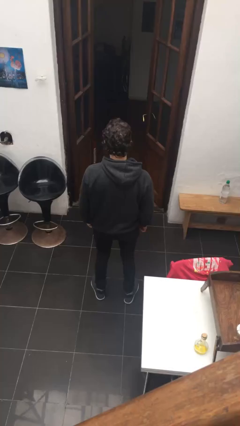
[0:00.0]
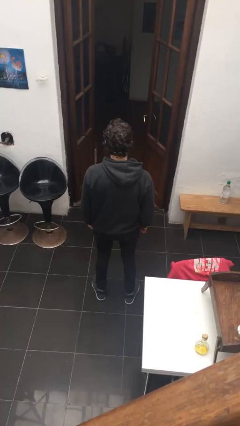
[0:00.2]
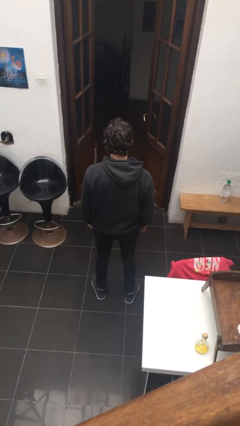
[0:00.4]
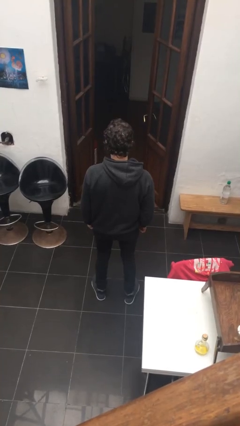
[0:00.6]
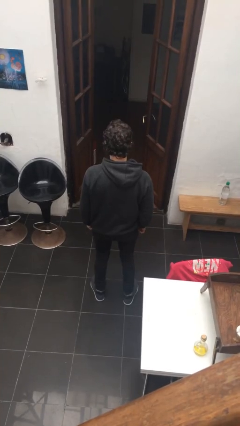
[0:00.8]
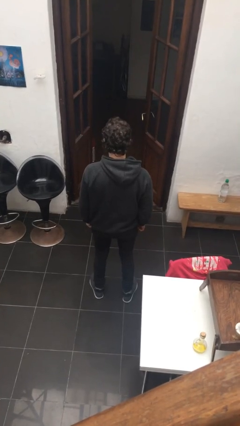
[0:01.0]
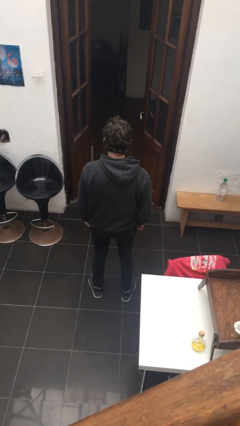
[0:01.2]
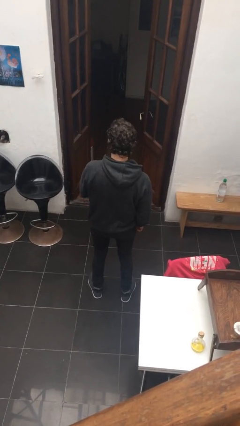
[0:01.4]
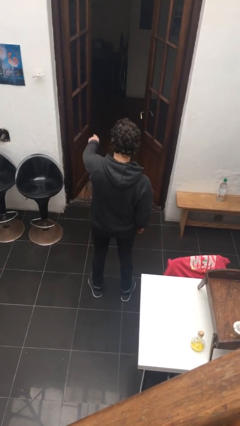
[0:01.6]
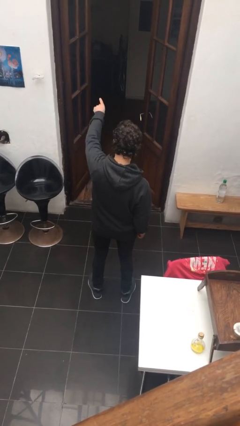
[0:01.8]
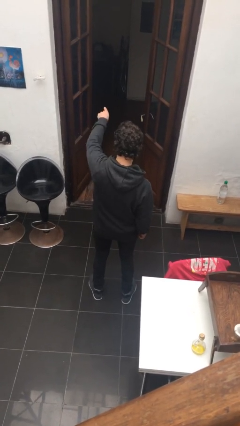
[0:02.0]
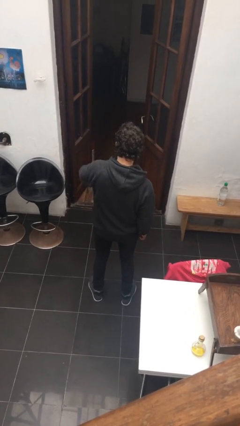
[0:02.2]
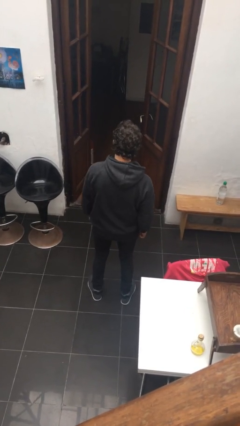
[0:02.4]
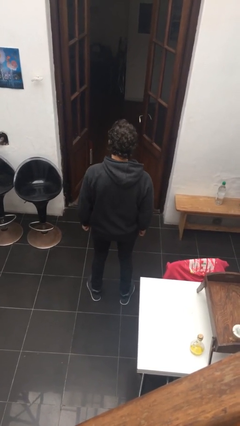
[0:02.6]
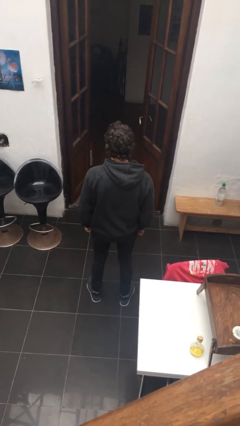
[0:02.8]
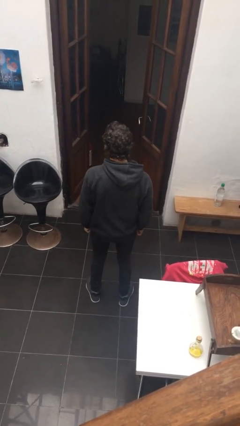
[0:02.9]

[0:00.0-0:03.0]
person points at person

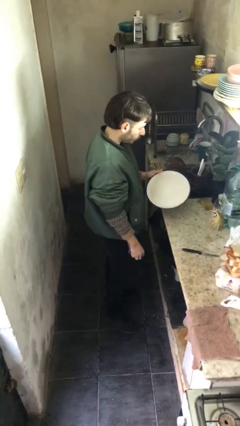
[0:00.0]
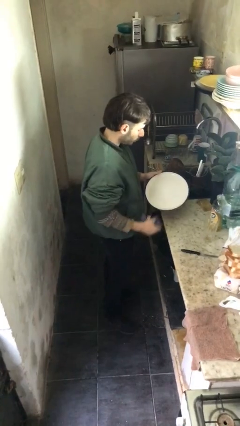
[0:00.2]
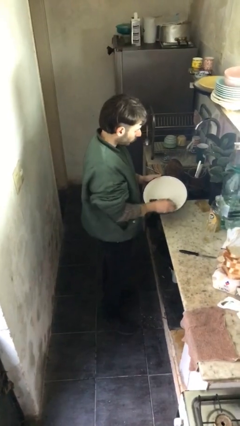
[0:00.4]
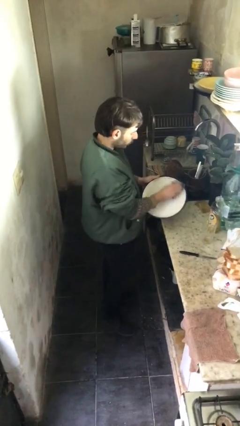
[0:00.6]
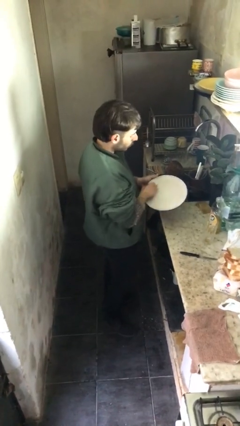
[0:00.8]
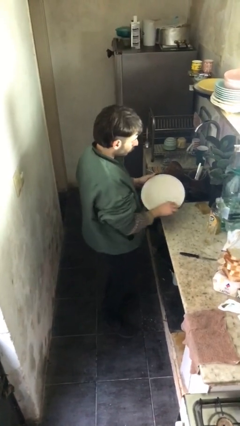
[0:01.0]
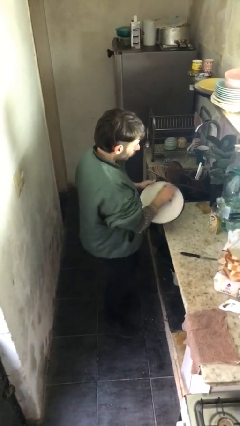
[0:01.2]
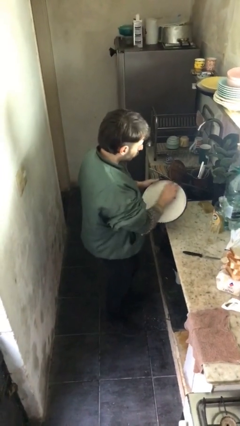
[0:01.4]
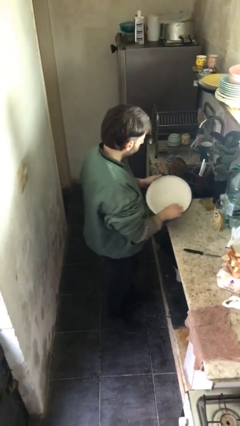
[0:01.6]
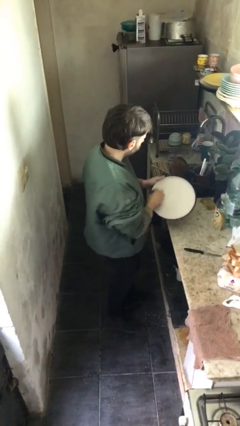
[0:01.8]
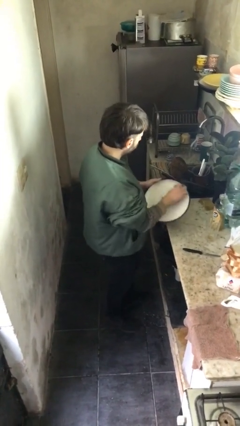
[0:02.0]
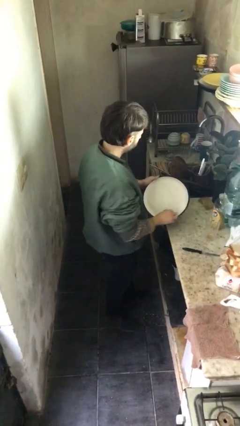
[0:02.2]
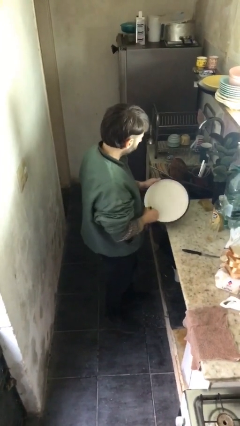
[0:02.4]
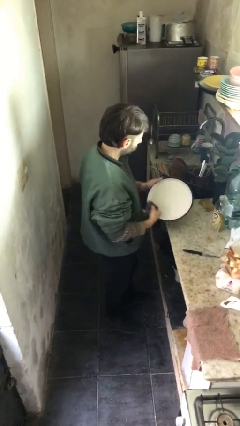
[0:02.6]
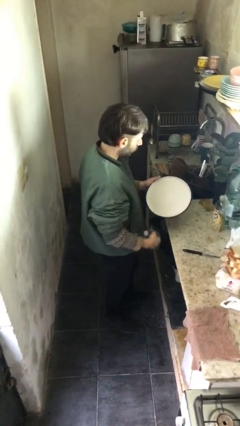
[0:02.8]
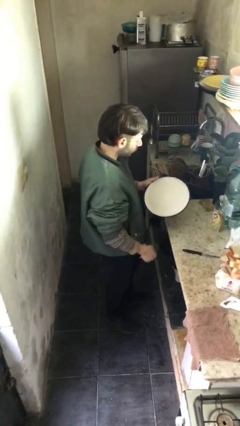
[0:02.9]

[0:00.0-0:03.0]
person dries dish

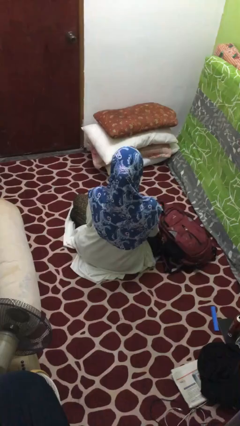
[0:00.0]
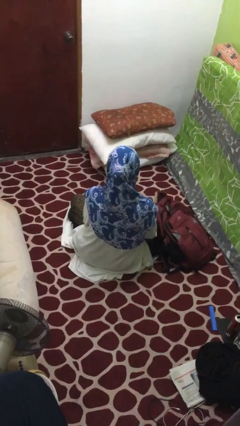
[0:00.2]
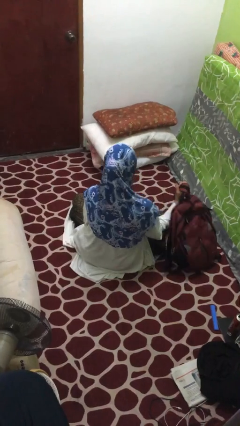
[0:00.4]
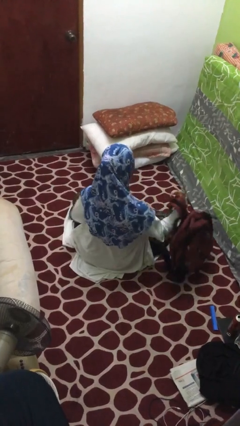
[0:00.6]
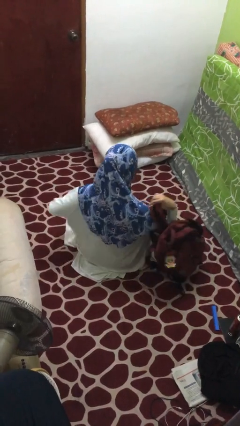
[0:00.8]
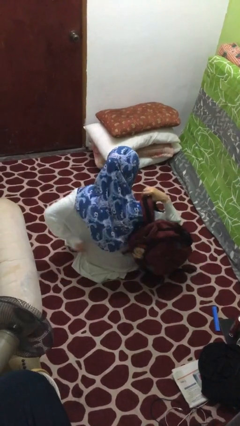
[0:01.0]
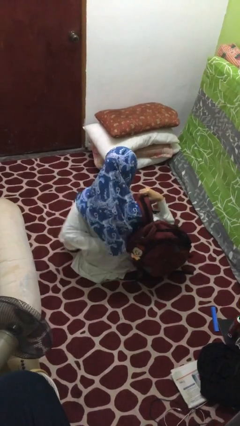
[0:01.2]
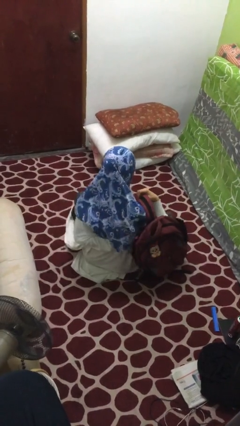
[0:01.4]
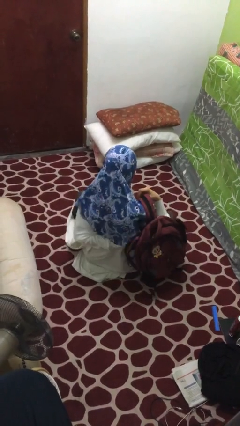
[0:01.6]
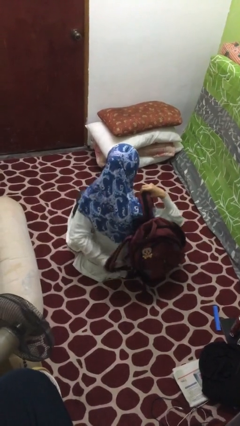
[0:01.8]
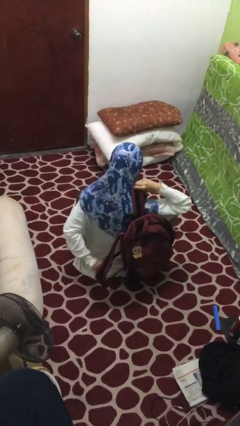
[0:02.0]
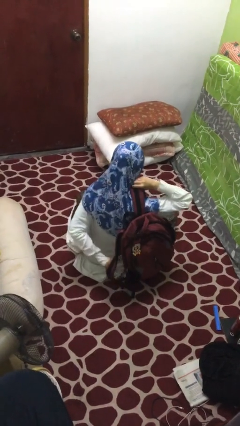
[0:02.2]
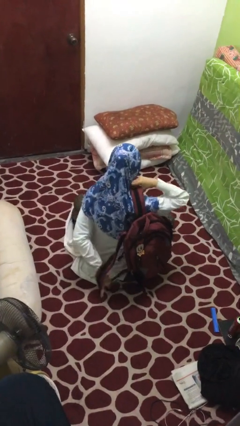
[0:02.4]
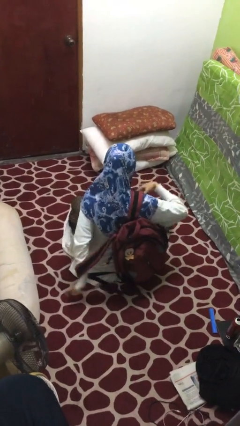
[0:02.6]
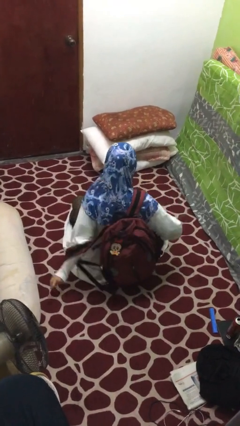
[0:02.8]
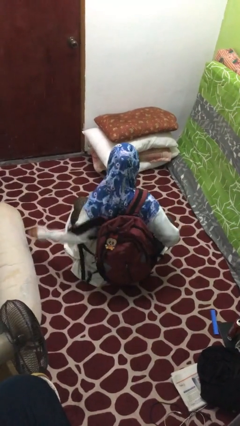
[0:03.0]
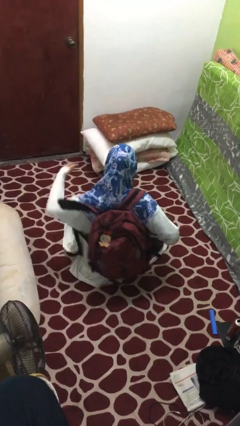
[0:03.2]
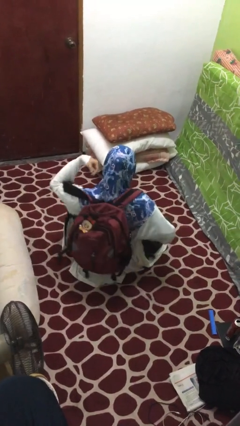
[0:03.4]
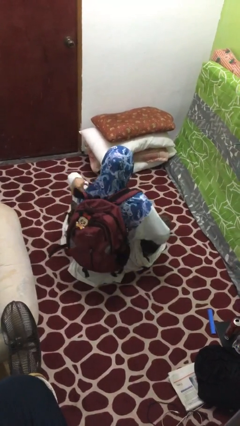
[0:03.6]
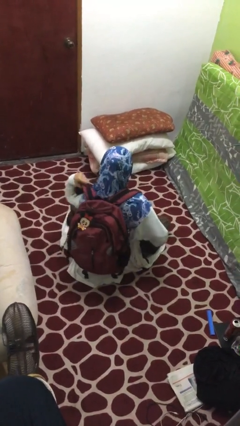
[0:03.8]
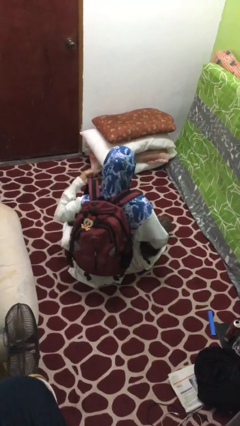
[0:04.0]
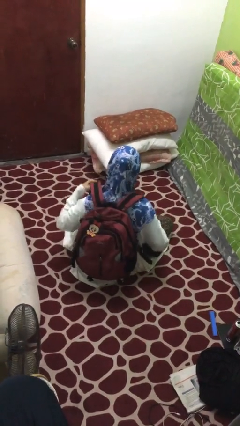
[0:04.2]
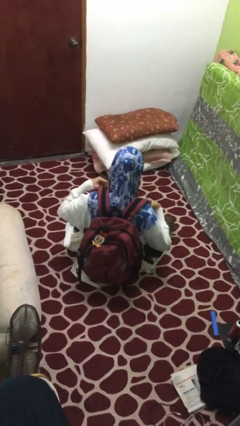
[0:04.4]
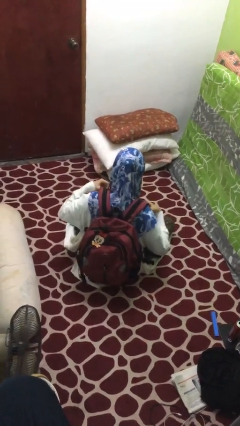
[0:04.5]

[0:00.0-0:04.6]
person puts on backpack

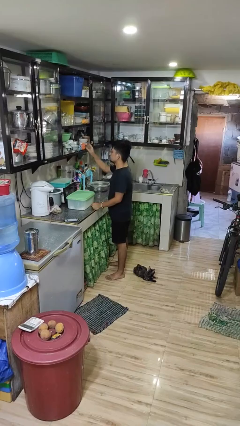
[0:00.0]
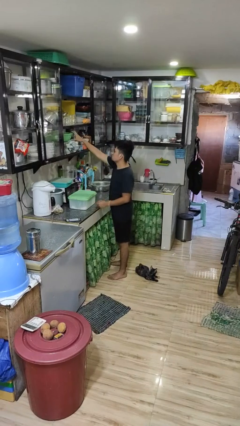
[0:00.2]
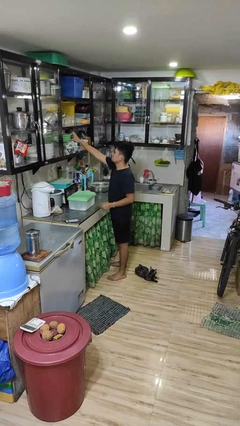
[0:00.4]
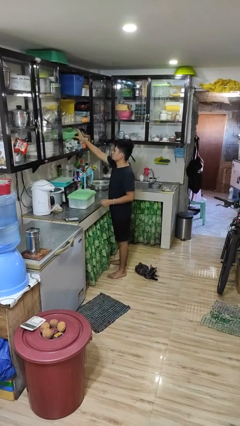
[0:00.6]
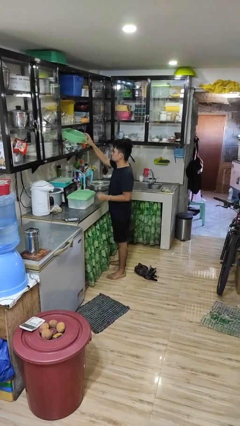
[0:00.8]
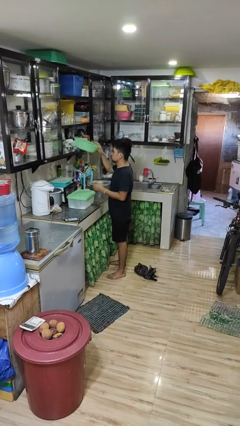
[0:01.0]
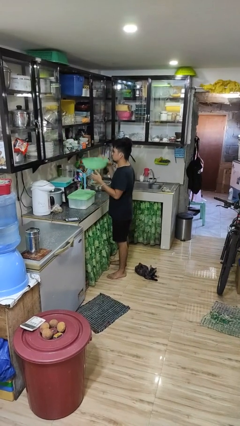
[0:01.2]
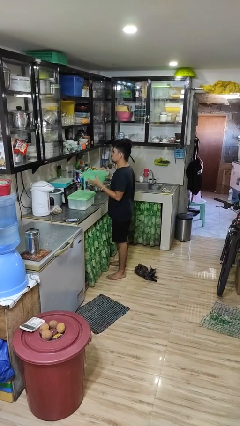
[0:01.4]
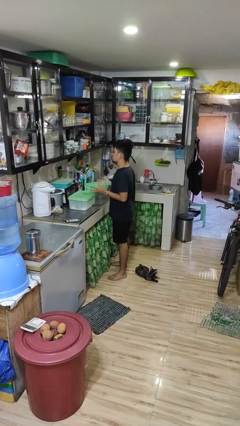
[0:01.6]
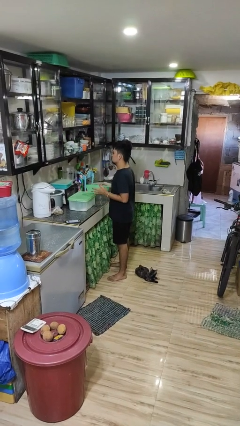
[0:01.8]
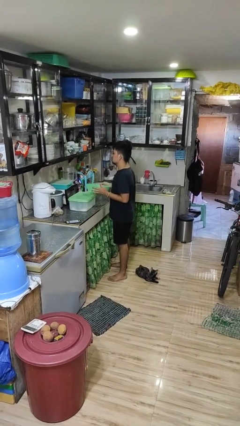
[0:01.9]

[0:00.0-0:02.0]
person picks up object from cabinet

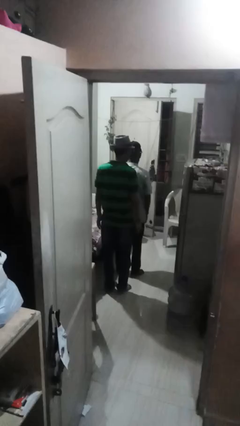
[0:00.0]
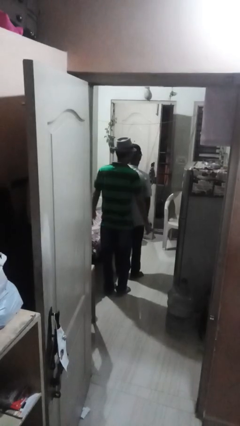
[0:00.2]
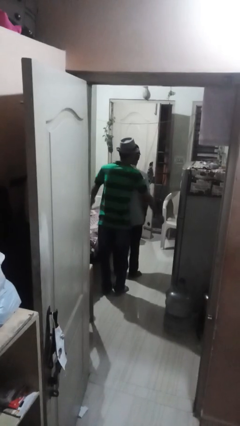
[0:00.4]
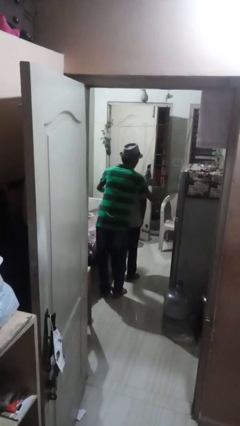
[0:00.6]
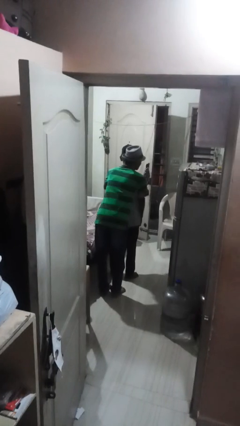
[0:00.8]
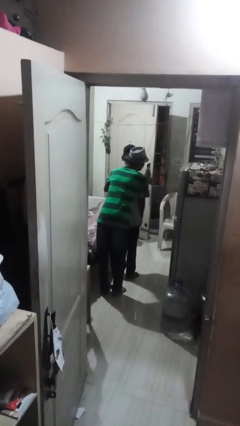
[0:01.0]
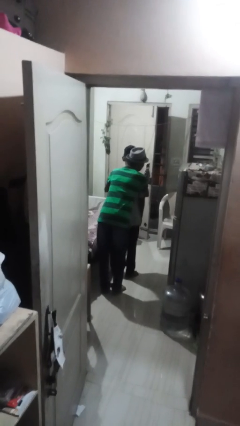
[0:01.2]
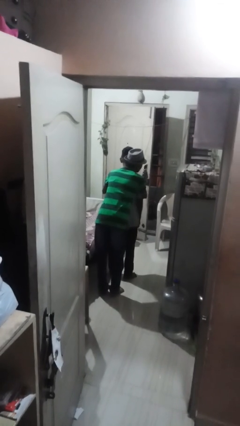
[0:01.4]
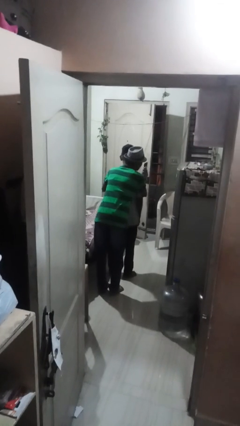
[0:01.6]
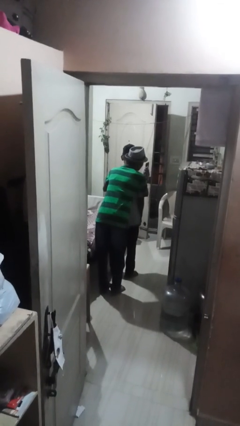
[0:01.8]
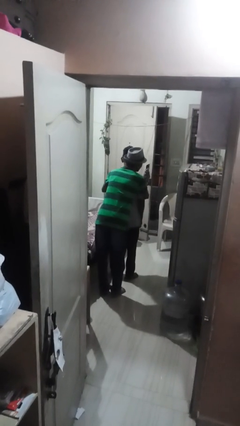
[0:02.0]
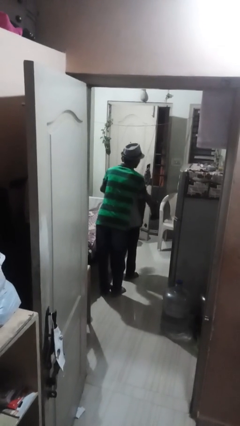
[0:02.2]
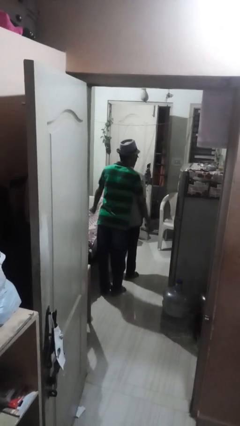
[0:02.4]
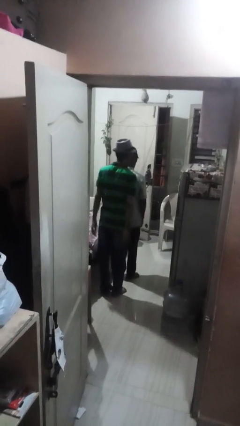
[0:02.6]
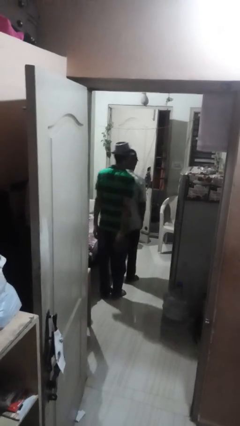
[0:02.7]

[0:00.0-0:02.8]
person hugs person from behind

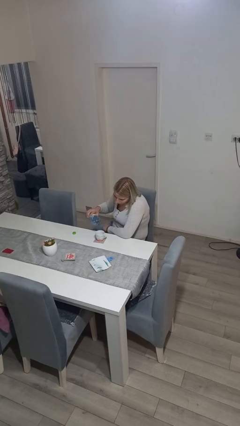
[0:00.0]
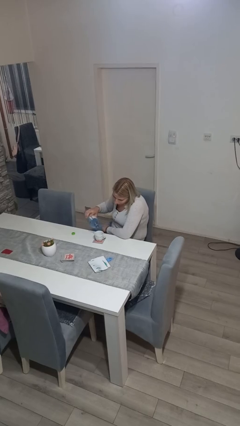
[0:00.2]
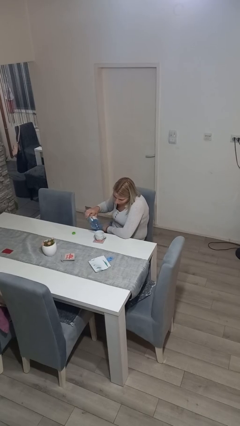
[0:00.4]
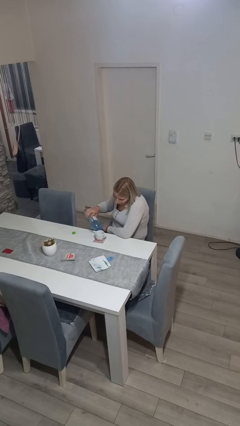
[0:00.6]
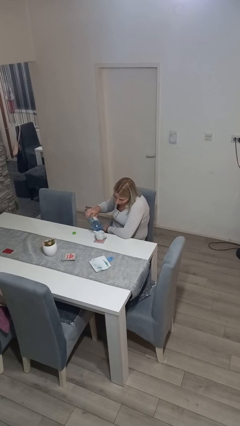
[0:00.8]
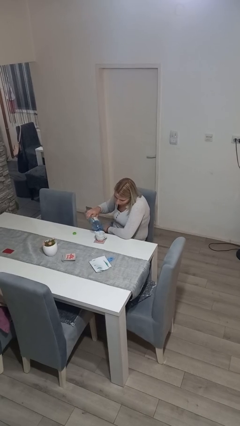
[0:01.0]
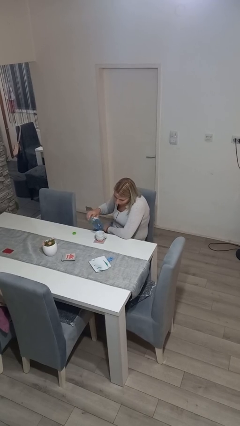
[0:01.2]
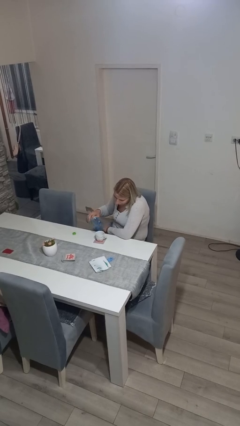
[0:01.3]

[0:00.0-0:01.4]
person pours liquid into cup

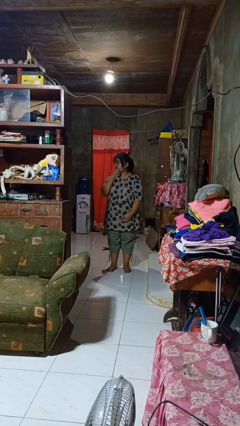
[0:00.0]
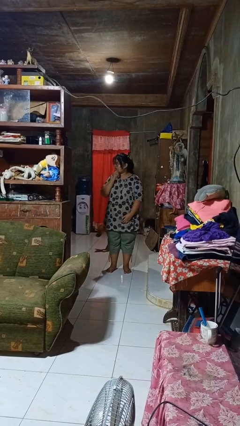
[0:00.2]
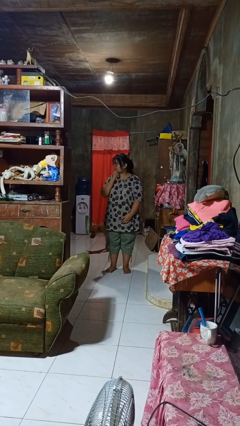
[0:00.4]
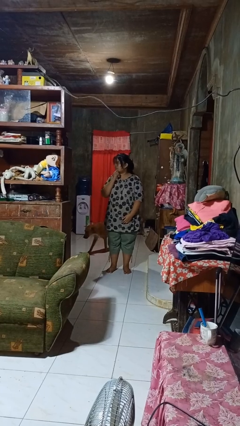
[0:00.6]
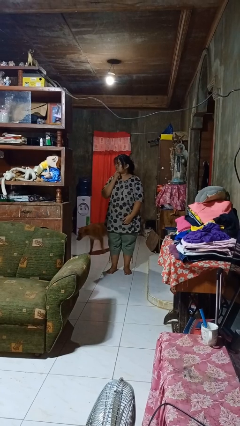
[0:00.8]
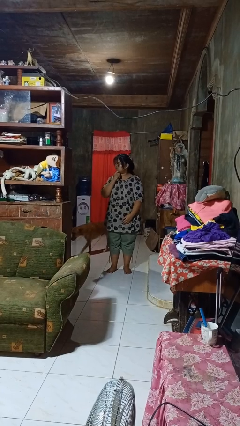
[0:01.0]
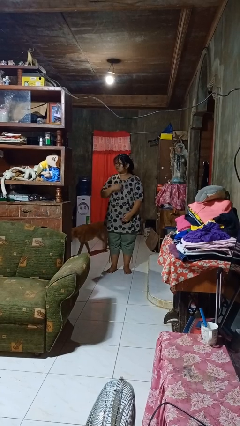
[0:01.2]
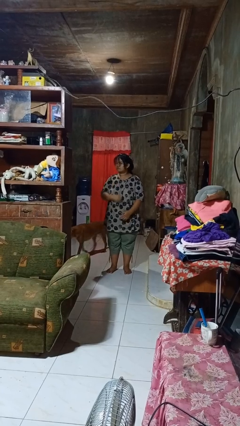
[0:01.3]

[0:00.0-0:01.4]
person strokes chin
